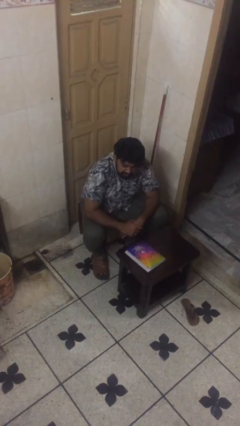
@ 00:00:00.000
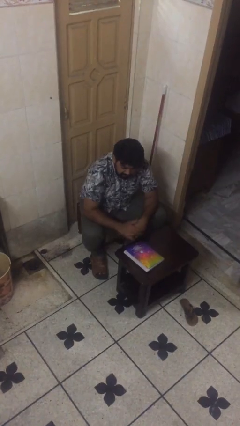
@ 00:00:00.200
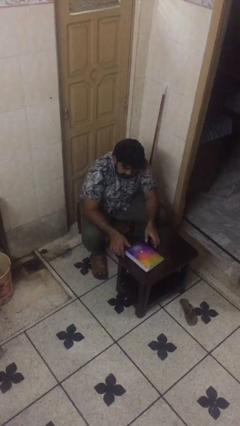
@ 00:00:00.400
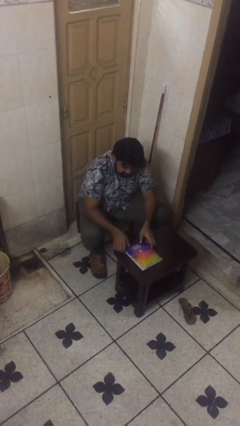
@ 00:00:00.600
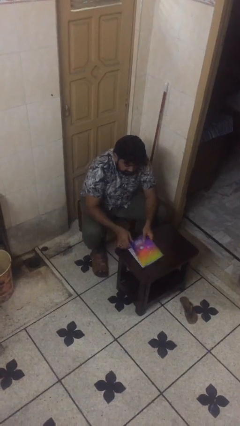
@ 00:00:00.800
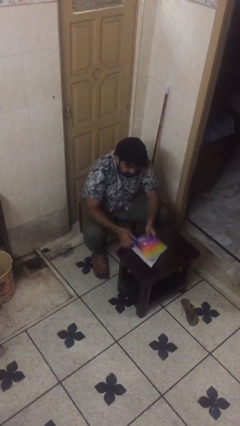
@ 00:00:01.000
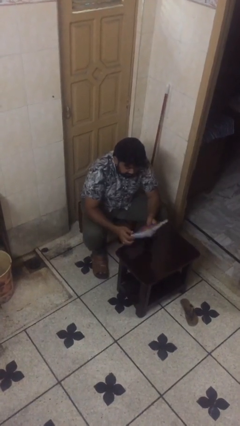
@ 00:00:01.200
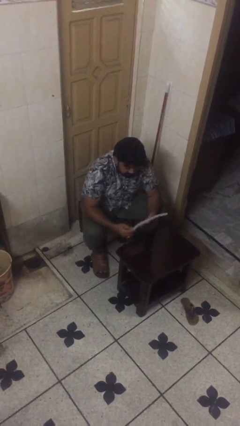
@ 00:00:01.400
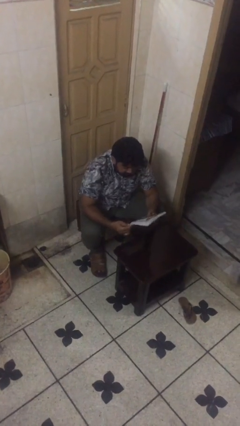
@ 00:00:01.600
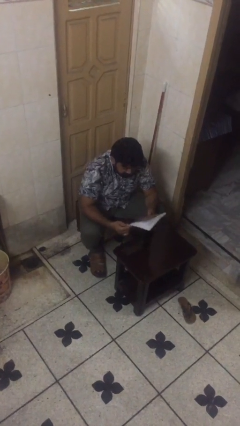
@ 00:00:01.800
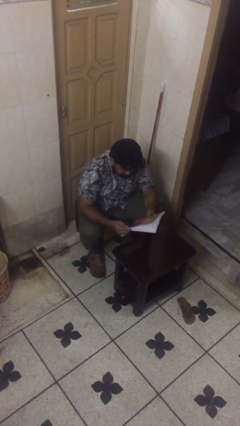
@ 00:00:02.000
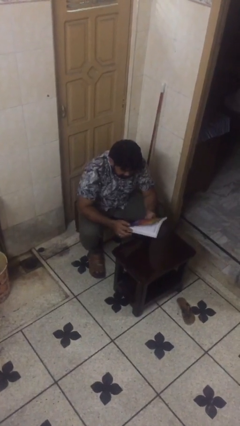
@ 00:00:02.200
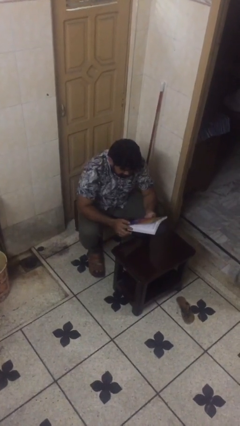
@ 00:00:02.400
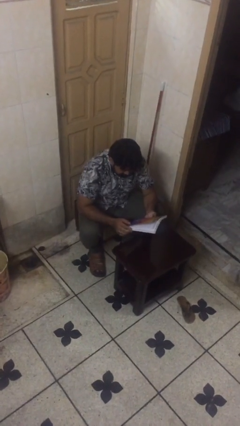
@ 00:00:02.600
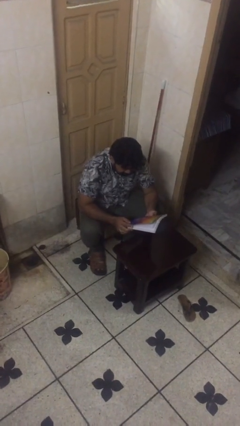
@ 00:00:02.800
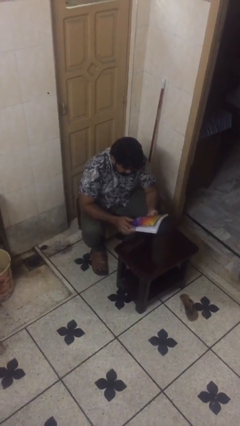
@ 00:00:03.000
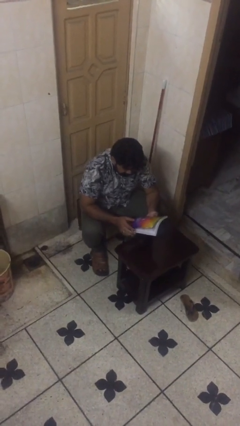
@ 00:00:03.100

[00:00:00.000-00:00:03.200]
person picks up object from table

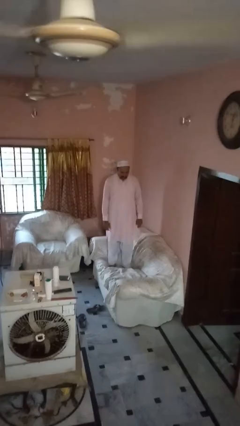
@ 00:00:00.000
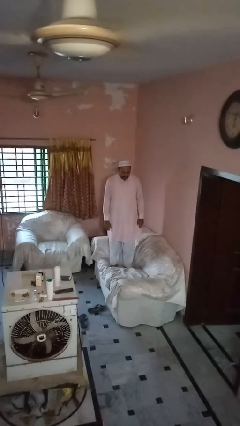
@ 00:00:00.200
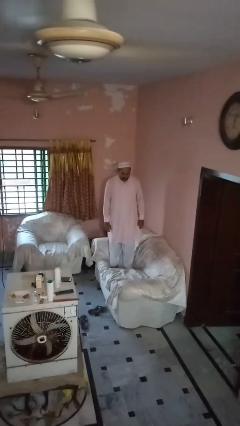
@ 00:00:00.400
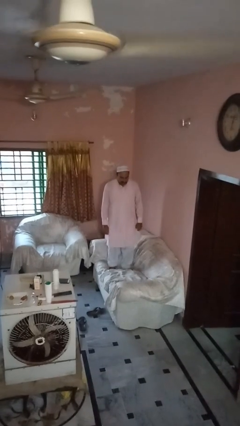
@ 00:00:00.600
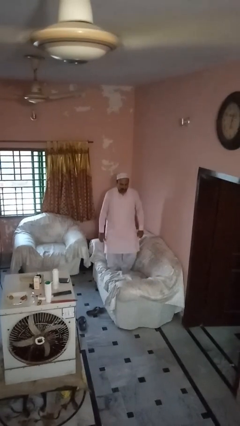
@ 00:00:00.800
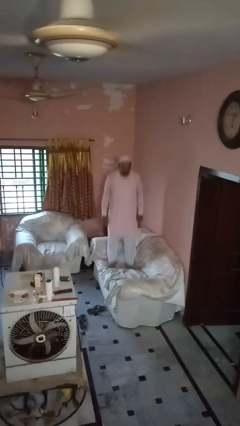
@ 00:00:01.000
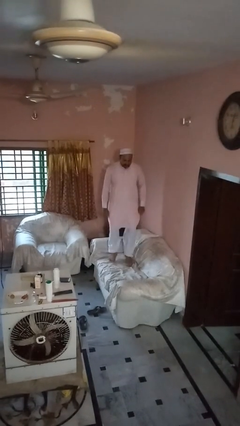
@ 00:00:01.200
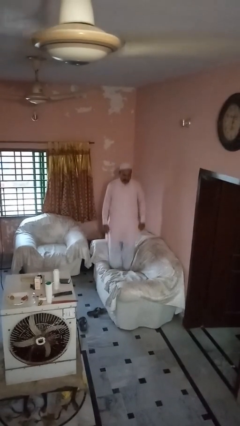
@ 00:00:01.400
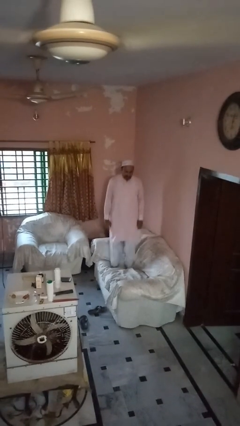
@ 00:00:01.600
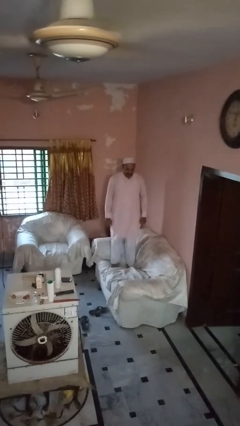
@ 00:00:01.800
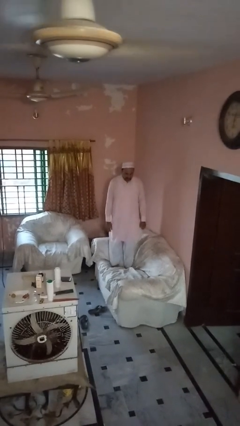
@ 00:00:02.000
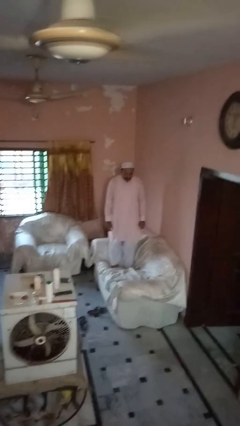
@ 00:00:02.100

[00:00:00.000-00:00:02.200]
person jumps on couch

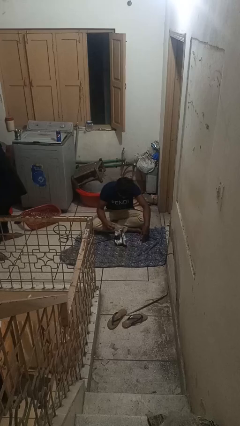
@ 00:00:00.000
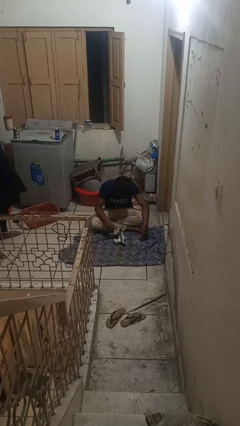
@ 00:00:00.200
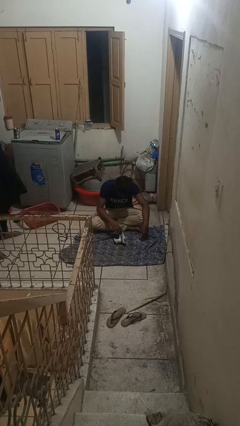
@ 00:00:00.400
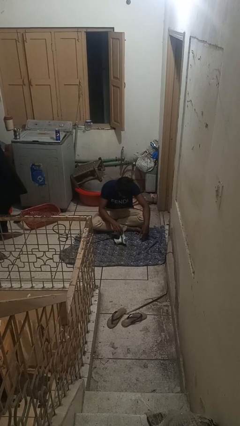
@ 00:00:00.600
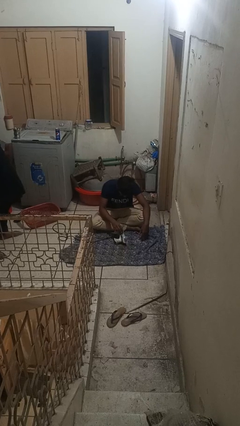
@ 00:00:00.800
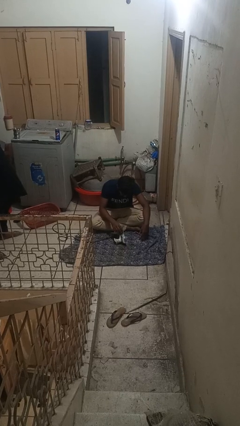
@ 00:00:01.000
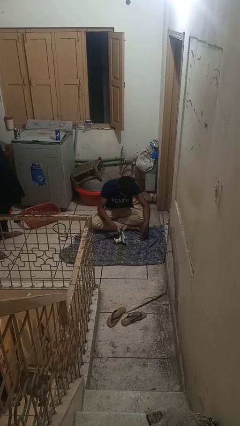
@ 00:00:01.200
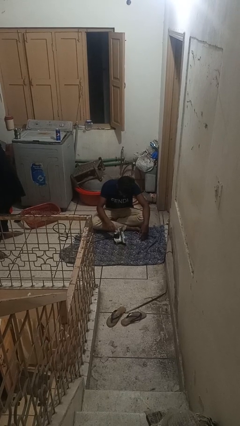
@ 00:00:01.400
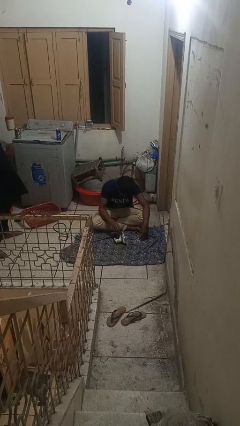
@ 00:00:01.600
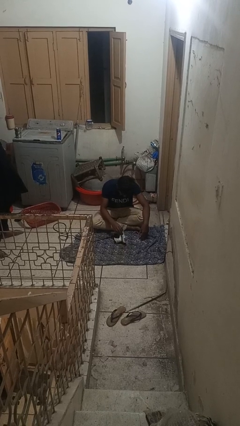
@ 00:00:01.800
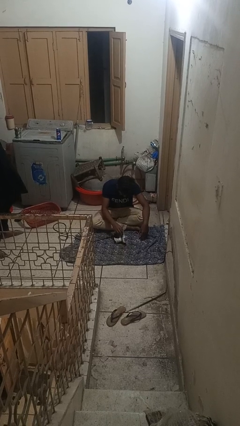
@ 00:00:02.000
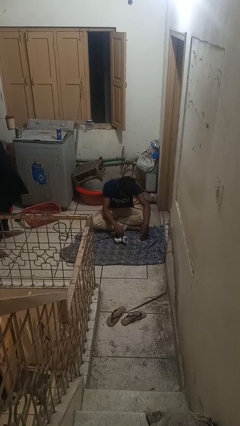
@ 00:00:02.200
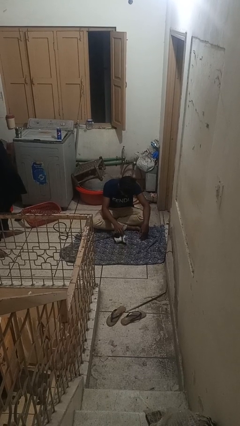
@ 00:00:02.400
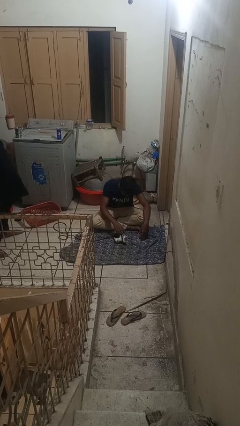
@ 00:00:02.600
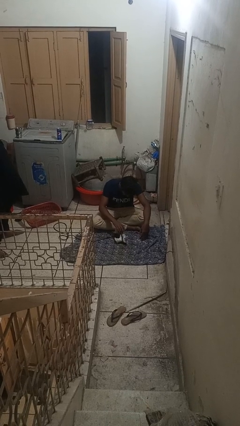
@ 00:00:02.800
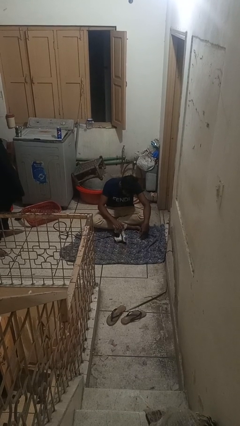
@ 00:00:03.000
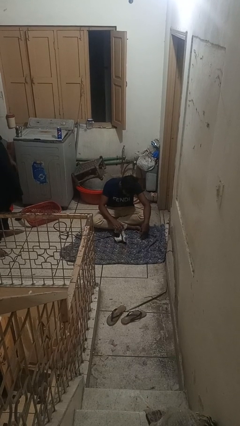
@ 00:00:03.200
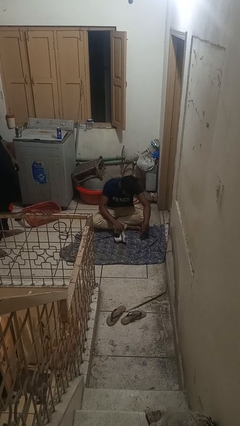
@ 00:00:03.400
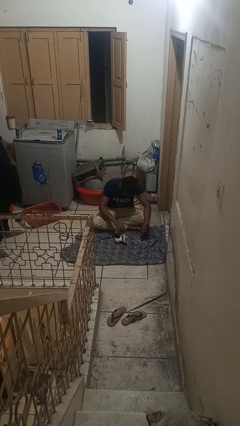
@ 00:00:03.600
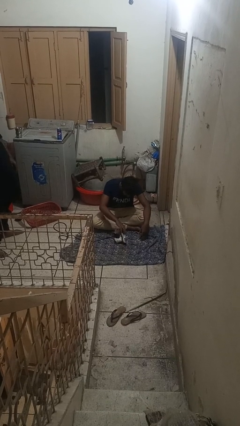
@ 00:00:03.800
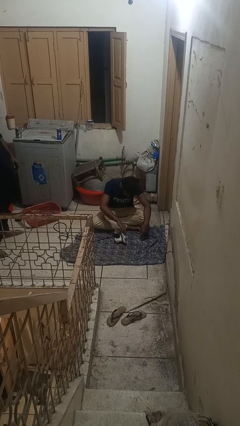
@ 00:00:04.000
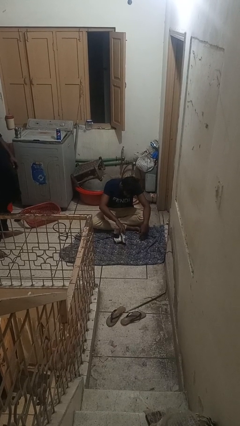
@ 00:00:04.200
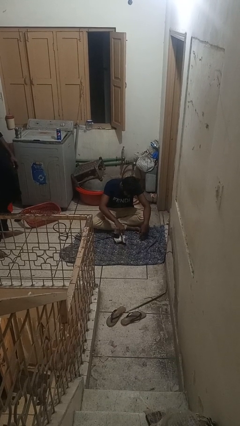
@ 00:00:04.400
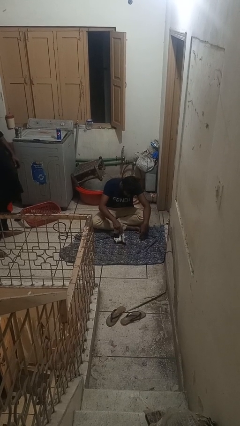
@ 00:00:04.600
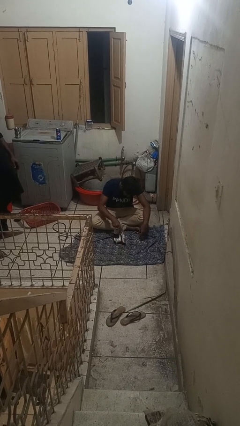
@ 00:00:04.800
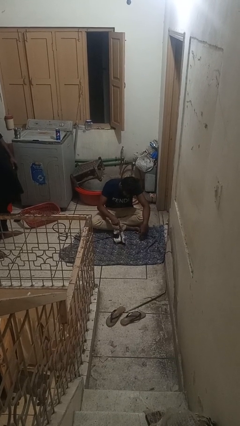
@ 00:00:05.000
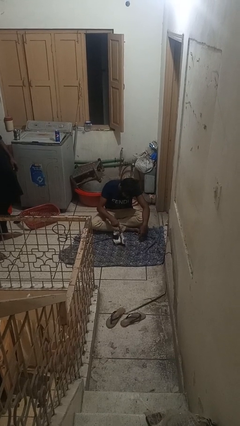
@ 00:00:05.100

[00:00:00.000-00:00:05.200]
person taps object with finger

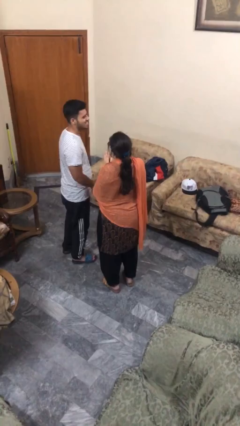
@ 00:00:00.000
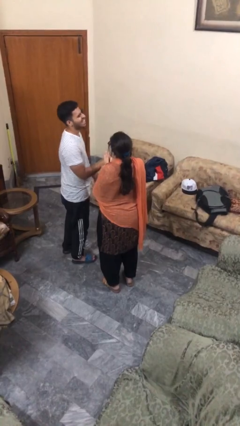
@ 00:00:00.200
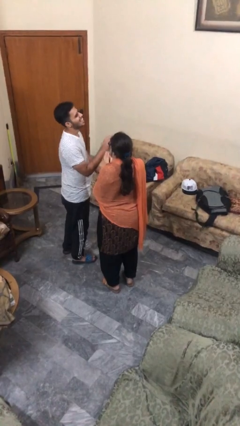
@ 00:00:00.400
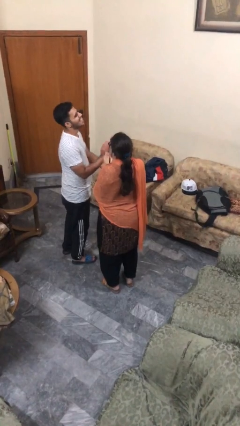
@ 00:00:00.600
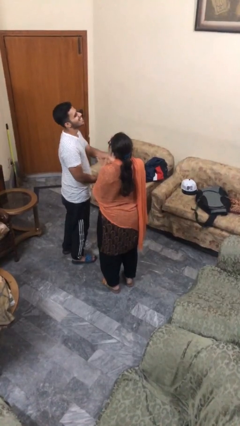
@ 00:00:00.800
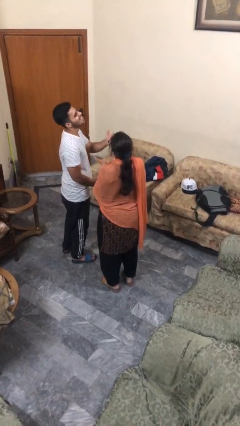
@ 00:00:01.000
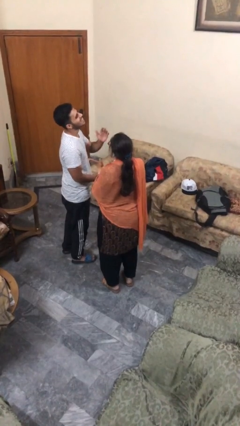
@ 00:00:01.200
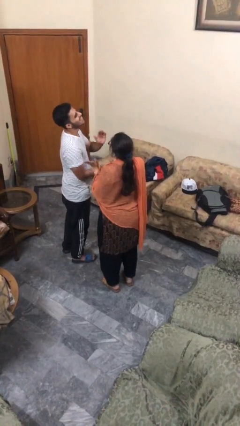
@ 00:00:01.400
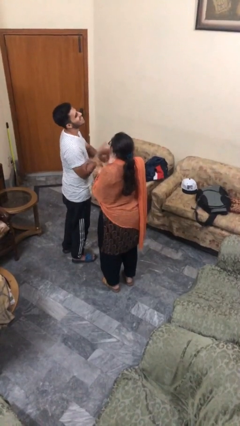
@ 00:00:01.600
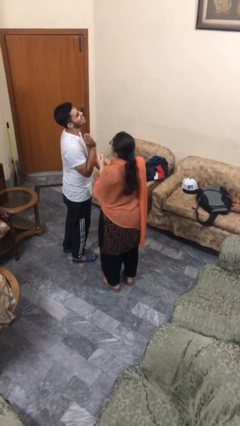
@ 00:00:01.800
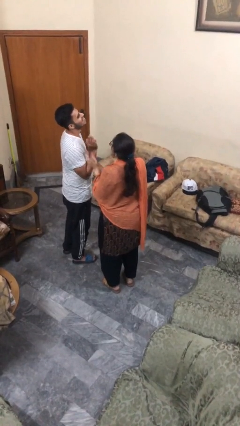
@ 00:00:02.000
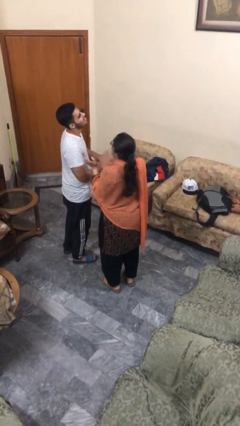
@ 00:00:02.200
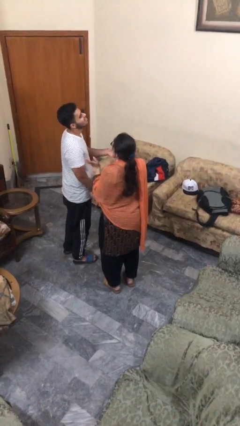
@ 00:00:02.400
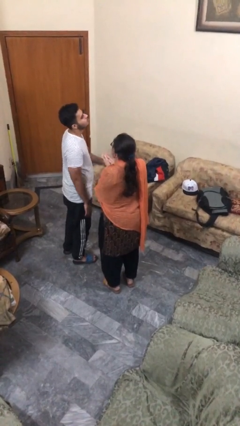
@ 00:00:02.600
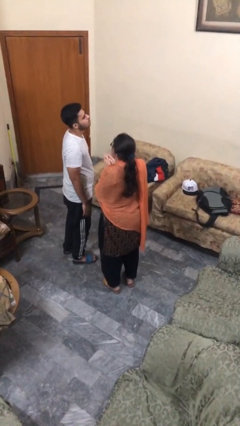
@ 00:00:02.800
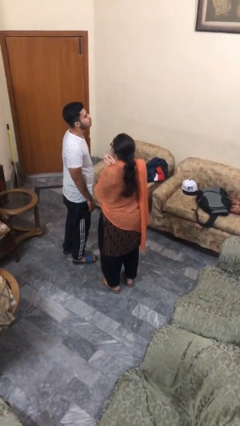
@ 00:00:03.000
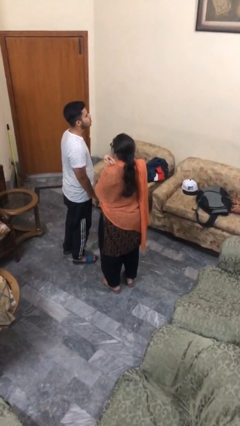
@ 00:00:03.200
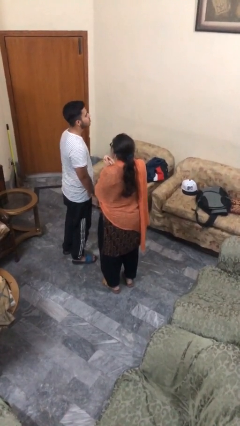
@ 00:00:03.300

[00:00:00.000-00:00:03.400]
person laughs with person

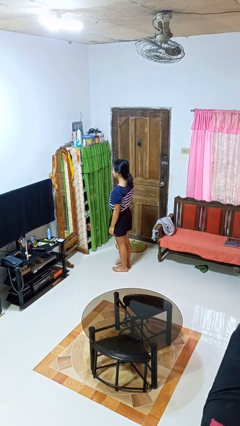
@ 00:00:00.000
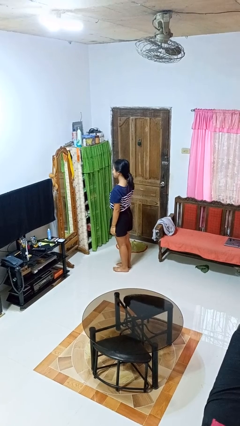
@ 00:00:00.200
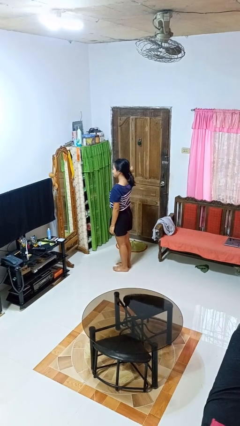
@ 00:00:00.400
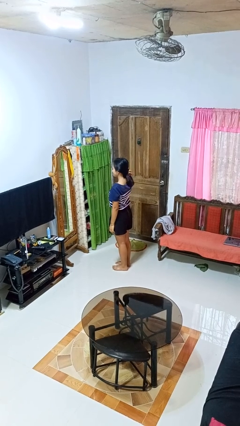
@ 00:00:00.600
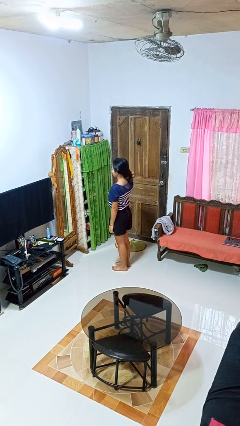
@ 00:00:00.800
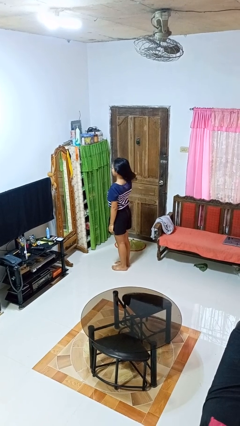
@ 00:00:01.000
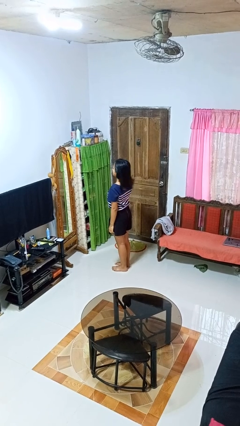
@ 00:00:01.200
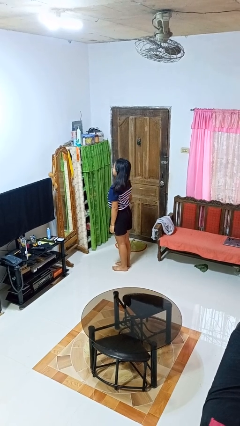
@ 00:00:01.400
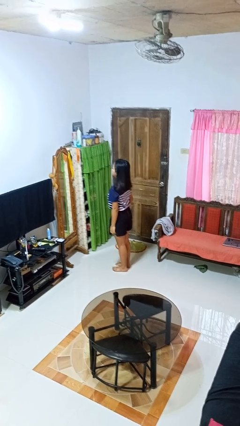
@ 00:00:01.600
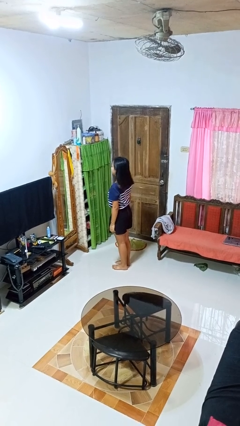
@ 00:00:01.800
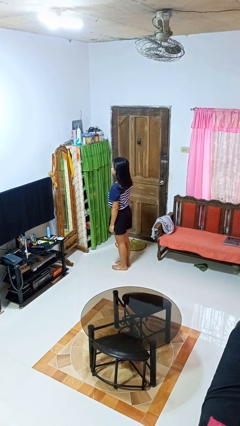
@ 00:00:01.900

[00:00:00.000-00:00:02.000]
person takes off hairtie

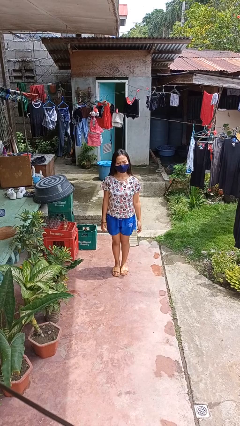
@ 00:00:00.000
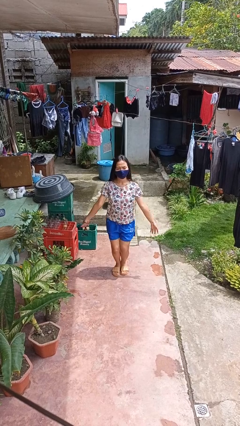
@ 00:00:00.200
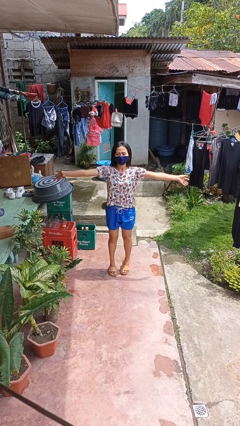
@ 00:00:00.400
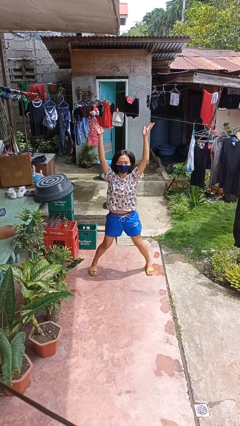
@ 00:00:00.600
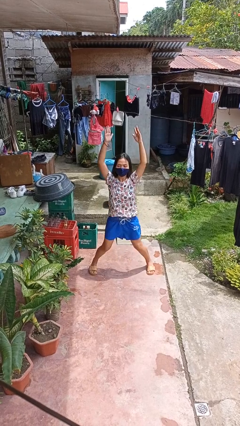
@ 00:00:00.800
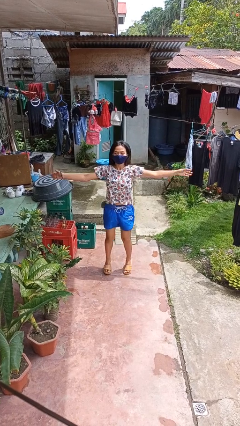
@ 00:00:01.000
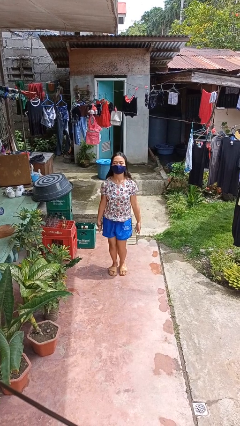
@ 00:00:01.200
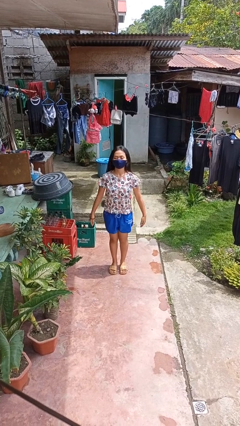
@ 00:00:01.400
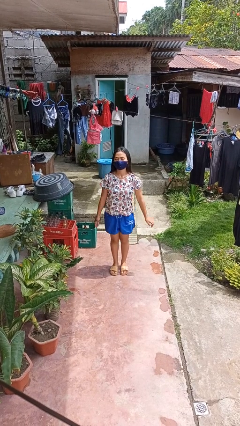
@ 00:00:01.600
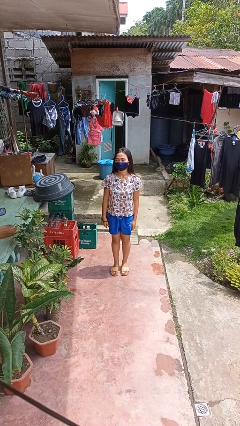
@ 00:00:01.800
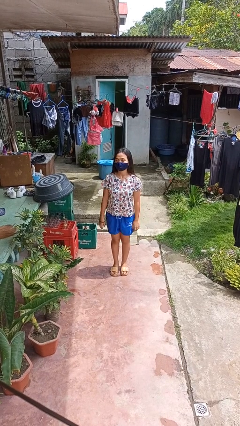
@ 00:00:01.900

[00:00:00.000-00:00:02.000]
person exercises with jumping jacks
